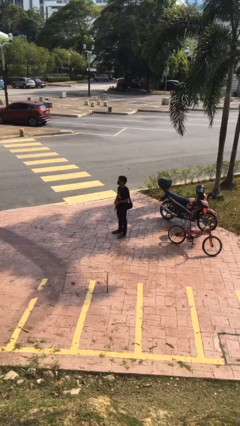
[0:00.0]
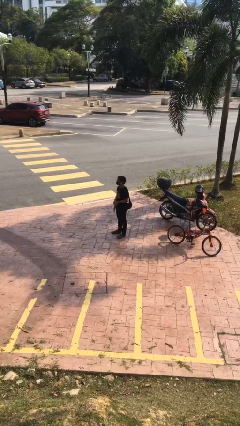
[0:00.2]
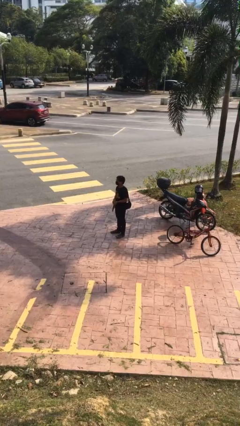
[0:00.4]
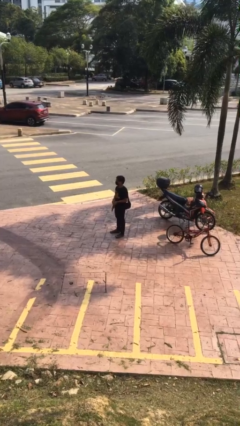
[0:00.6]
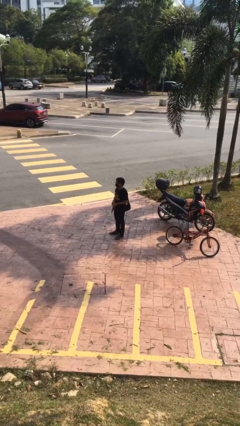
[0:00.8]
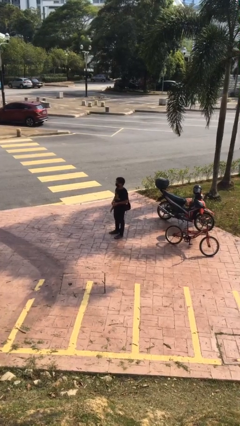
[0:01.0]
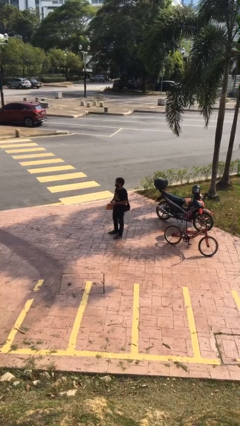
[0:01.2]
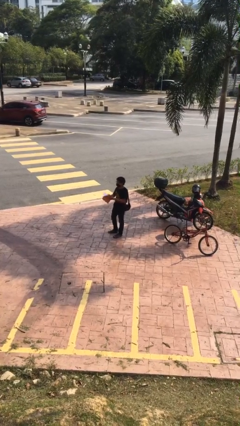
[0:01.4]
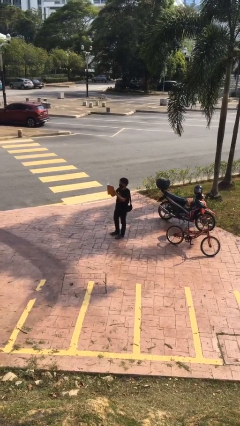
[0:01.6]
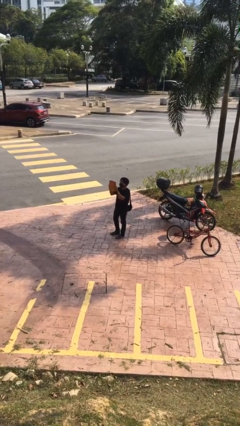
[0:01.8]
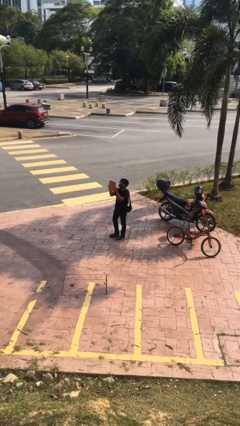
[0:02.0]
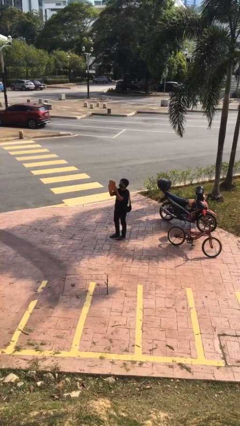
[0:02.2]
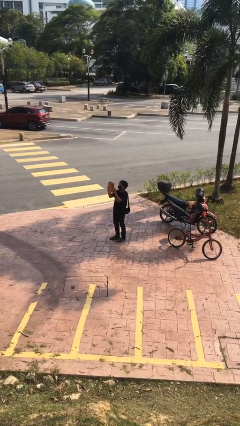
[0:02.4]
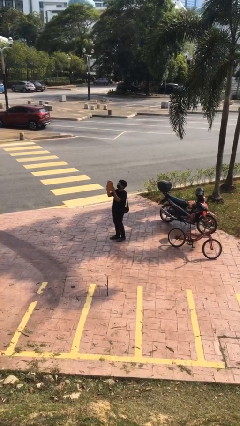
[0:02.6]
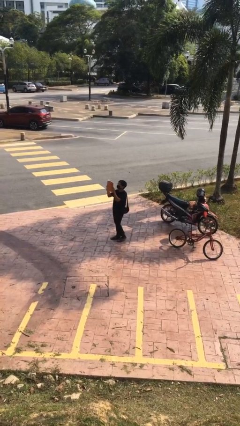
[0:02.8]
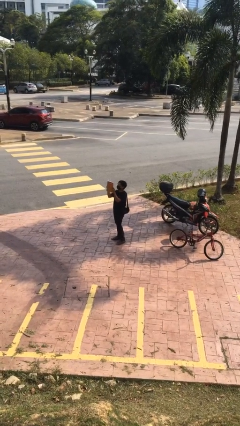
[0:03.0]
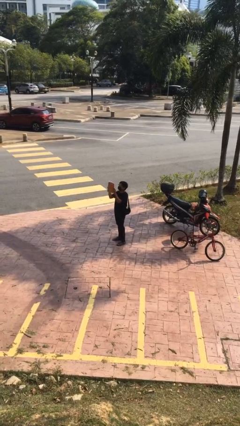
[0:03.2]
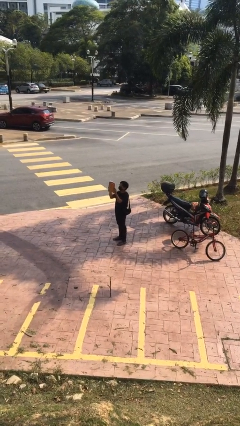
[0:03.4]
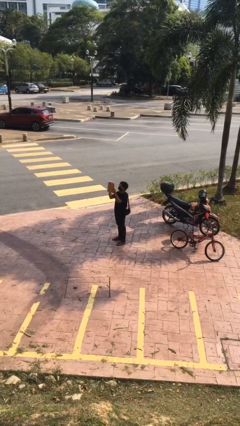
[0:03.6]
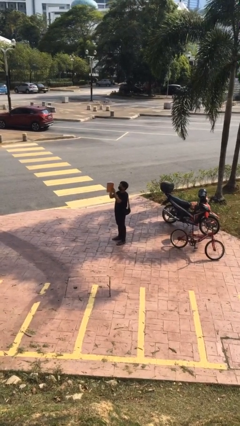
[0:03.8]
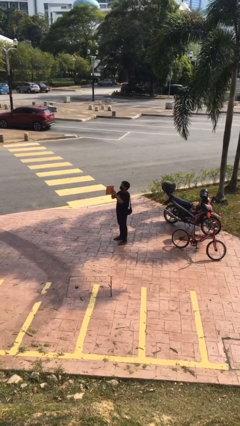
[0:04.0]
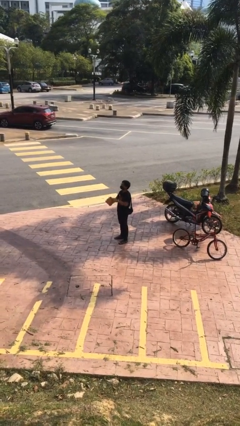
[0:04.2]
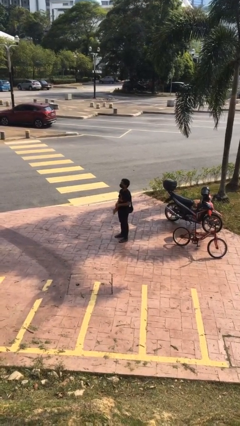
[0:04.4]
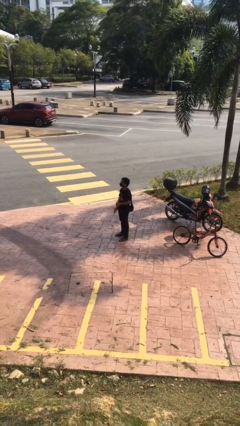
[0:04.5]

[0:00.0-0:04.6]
person reads document

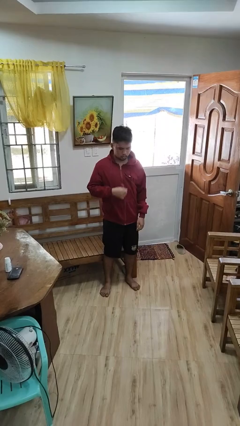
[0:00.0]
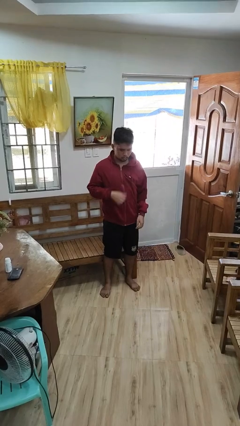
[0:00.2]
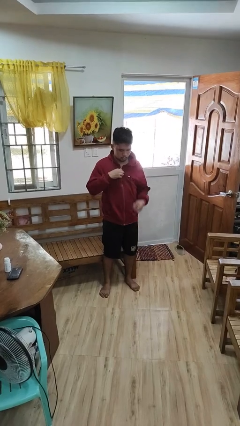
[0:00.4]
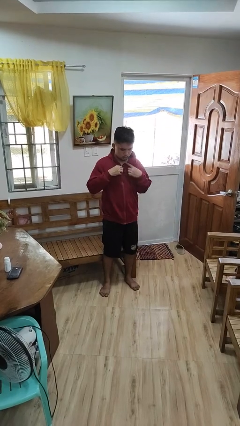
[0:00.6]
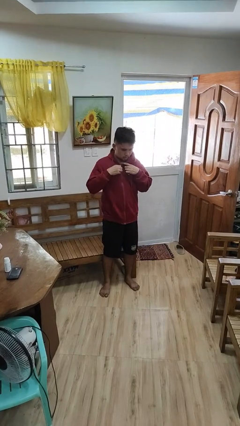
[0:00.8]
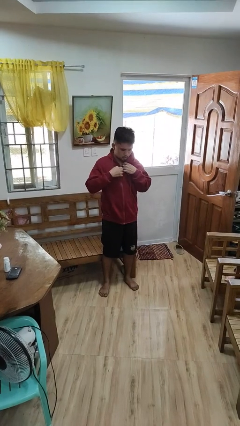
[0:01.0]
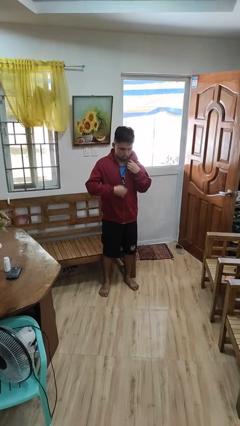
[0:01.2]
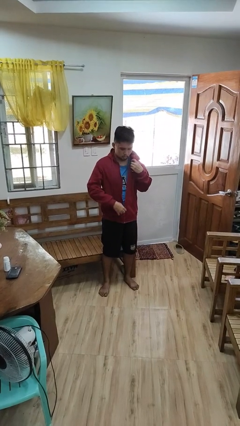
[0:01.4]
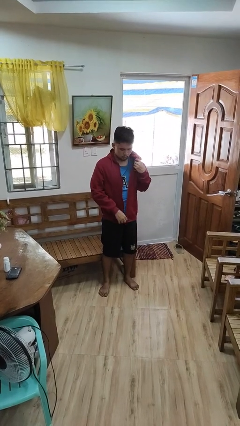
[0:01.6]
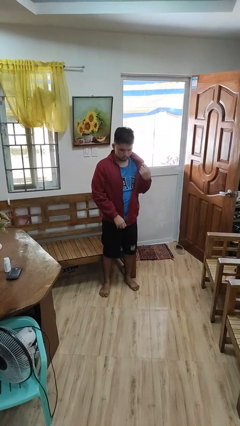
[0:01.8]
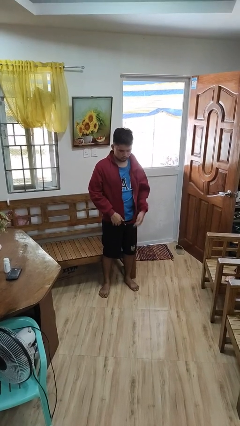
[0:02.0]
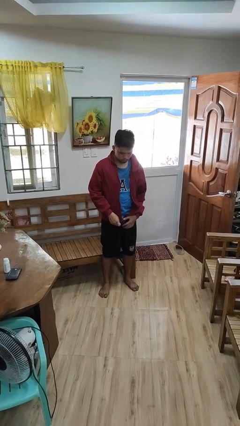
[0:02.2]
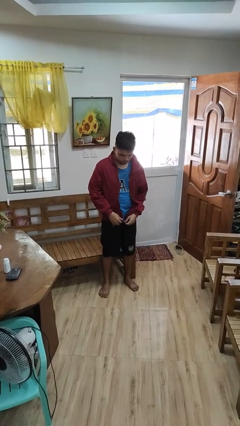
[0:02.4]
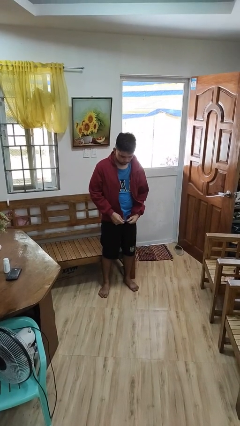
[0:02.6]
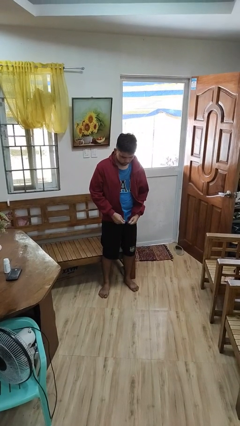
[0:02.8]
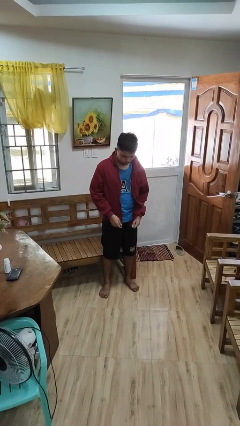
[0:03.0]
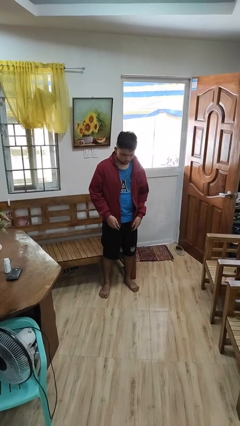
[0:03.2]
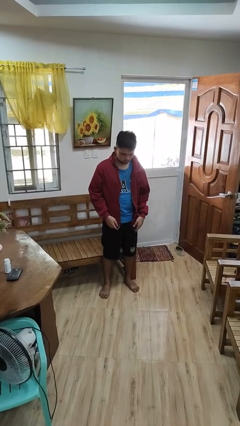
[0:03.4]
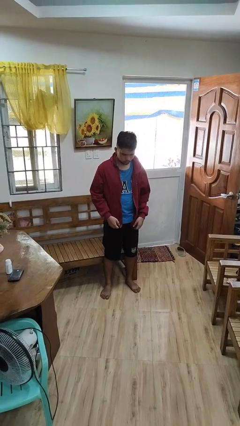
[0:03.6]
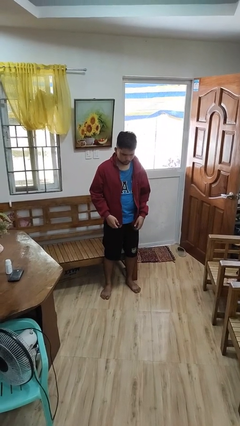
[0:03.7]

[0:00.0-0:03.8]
person unzips jacket

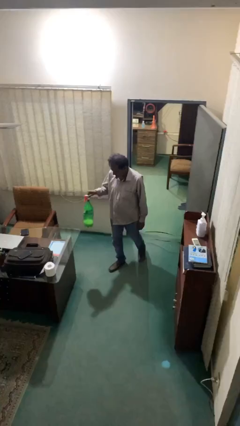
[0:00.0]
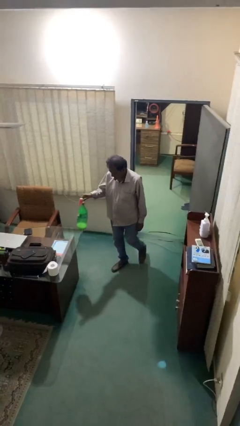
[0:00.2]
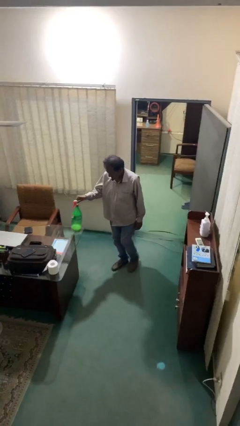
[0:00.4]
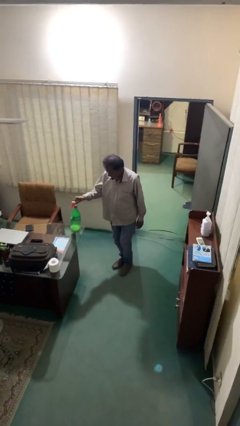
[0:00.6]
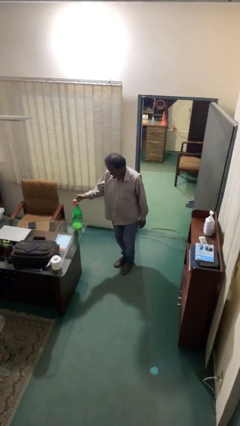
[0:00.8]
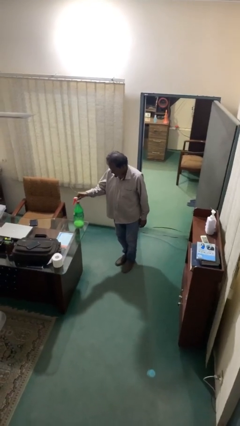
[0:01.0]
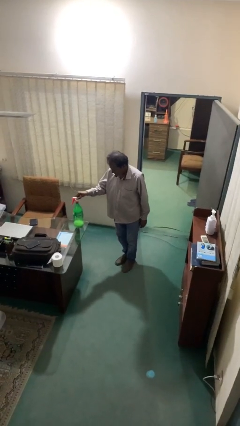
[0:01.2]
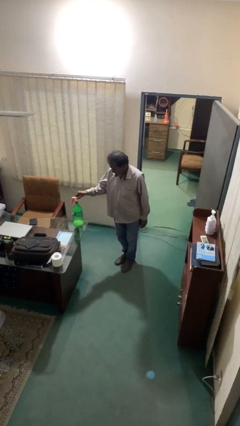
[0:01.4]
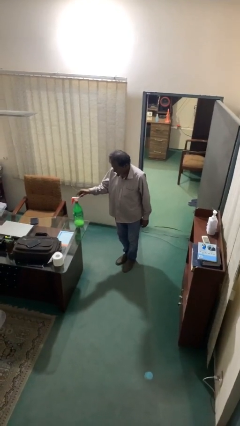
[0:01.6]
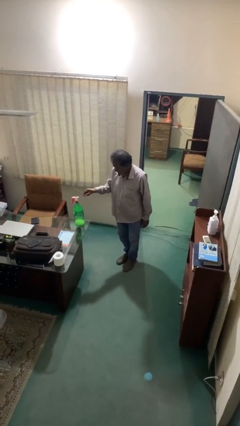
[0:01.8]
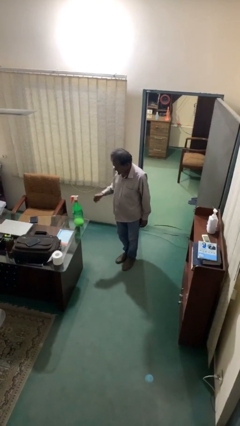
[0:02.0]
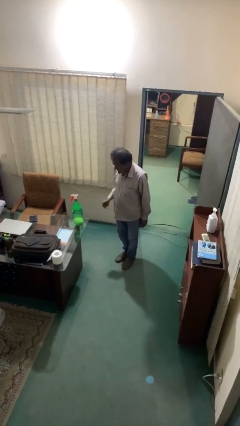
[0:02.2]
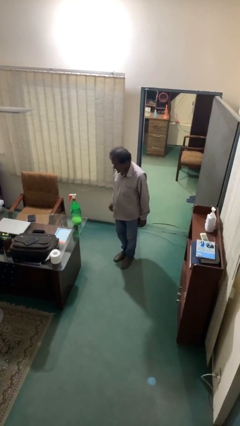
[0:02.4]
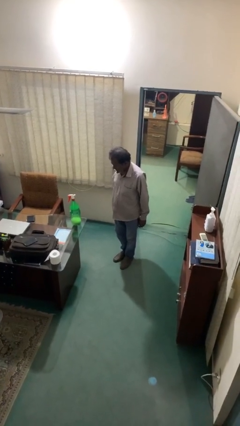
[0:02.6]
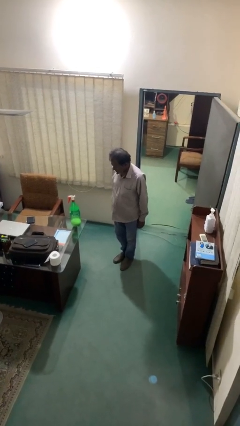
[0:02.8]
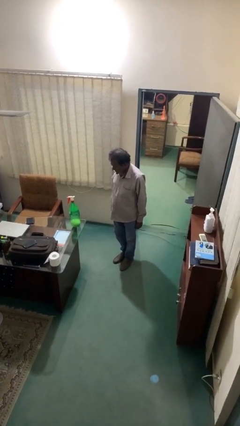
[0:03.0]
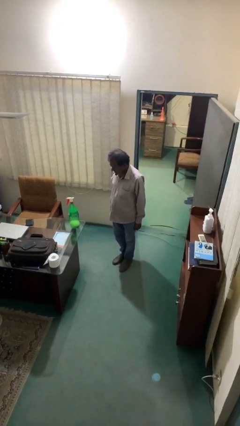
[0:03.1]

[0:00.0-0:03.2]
person puts down object on table

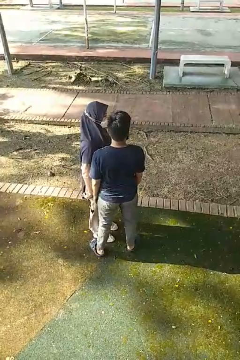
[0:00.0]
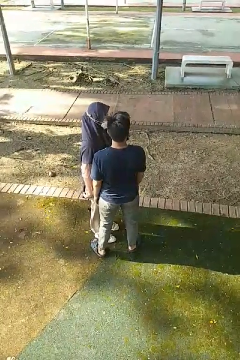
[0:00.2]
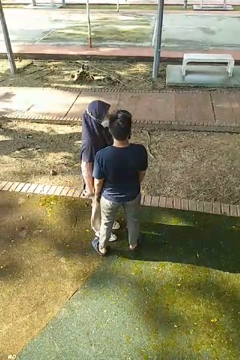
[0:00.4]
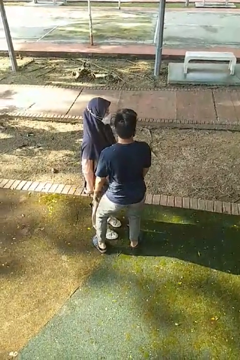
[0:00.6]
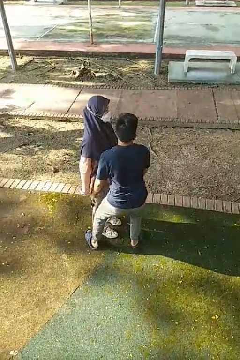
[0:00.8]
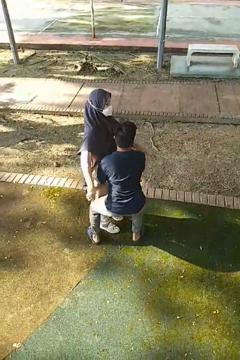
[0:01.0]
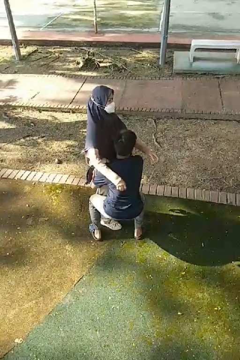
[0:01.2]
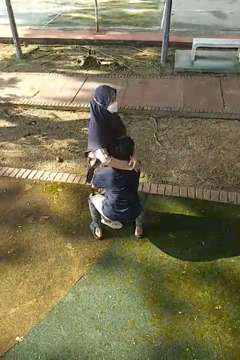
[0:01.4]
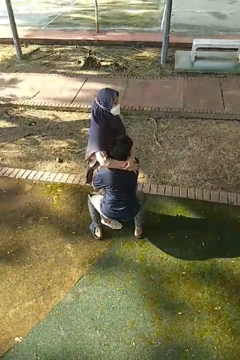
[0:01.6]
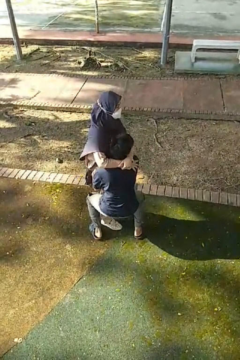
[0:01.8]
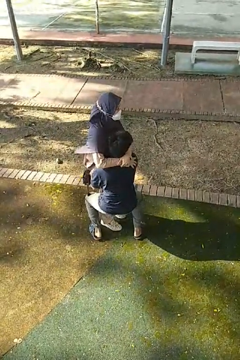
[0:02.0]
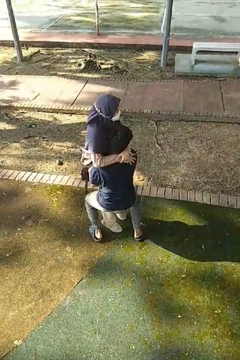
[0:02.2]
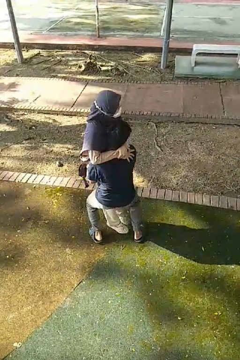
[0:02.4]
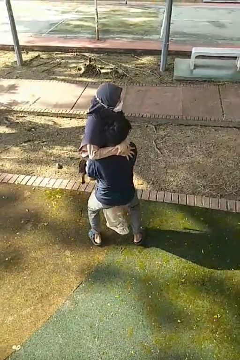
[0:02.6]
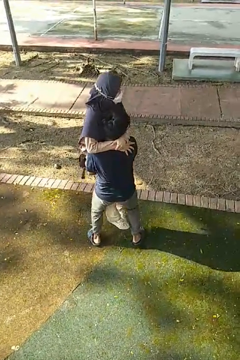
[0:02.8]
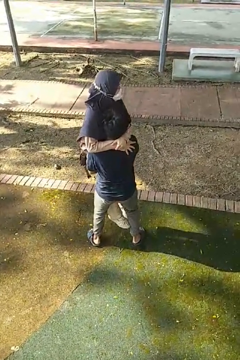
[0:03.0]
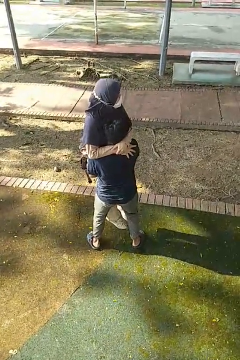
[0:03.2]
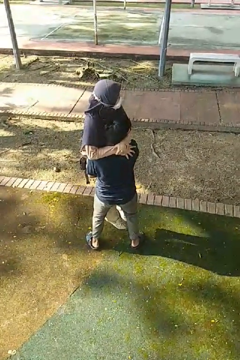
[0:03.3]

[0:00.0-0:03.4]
person picks up person

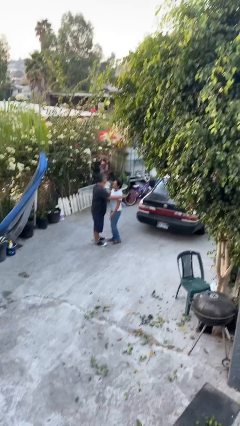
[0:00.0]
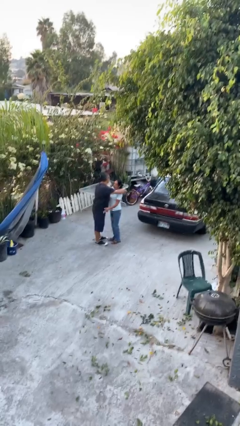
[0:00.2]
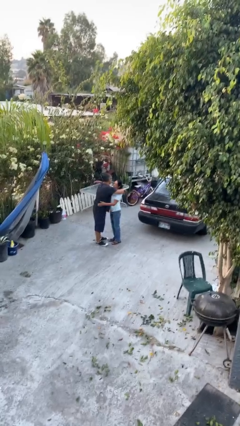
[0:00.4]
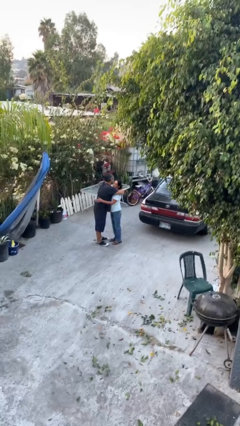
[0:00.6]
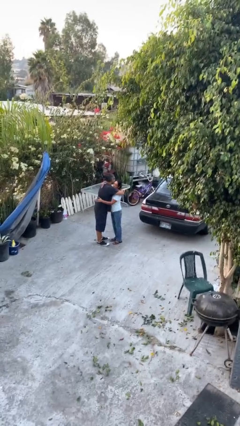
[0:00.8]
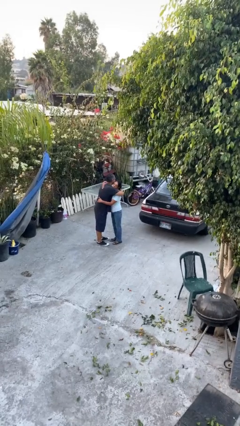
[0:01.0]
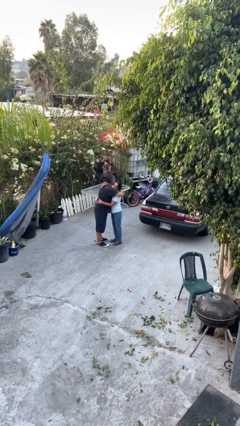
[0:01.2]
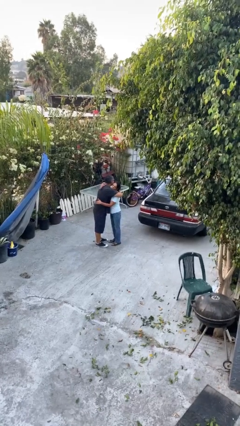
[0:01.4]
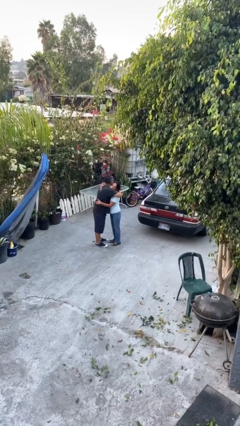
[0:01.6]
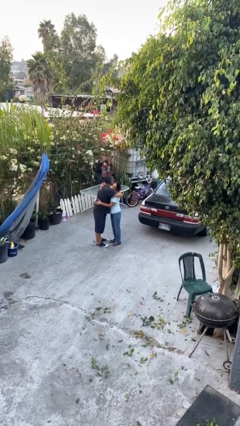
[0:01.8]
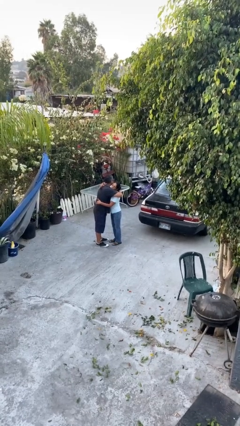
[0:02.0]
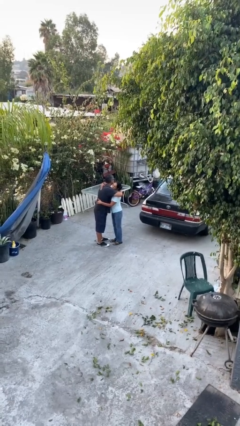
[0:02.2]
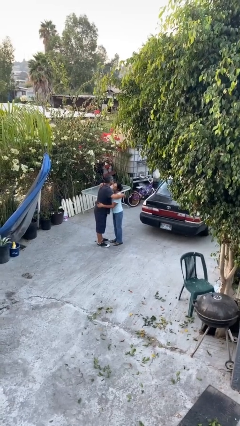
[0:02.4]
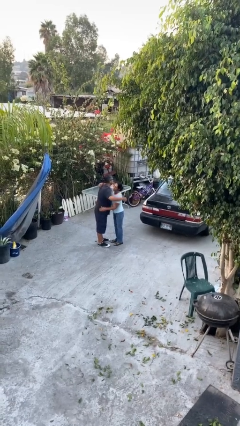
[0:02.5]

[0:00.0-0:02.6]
person embraces person

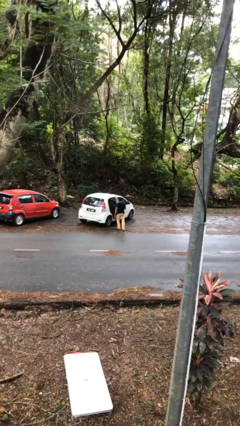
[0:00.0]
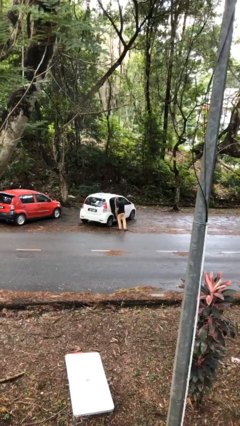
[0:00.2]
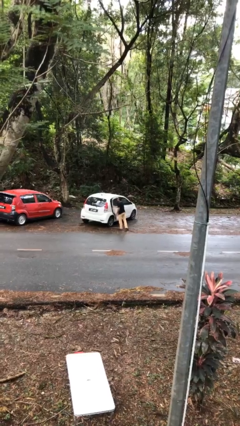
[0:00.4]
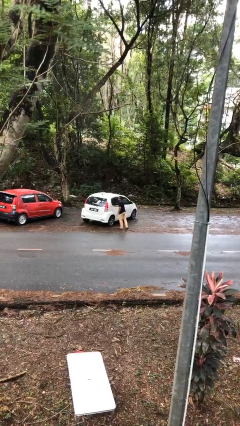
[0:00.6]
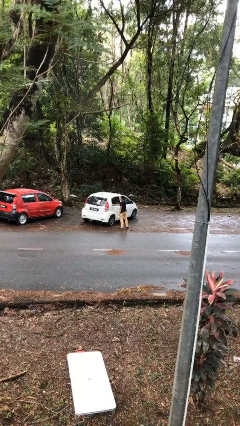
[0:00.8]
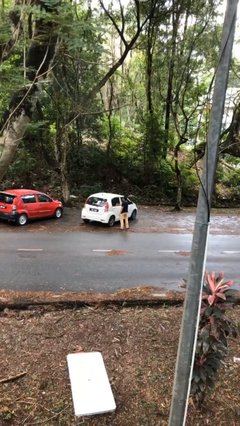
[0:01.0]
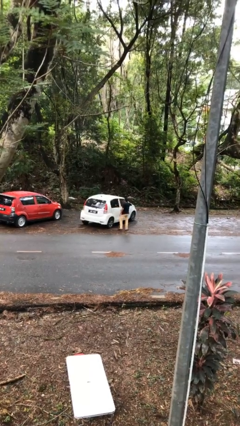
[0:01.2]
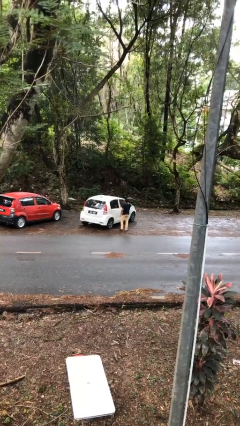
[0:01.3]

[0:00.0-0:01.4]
person closes car door
